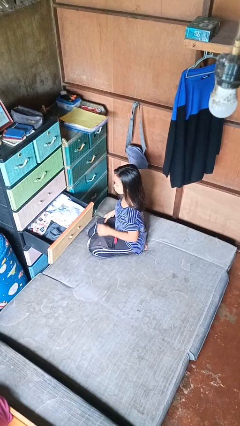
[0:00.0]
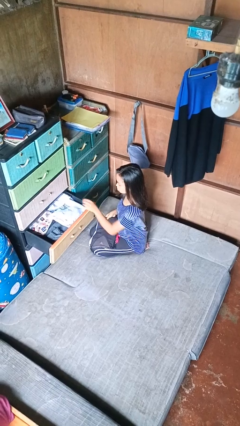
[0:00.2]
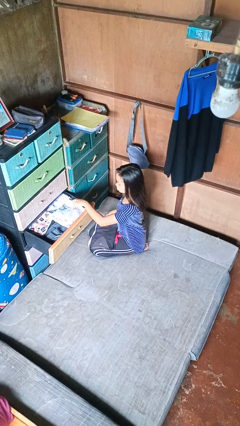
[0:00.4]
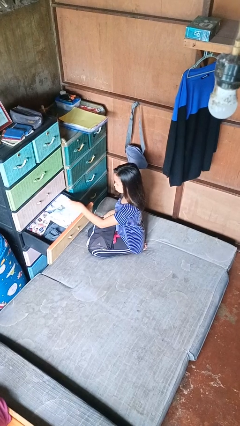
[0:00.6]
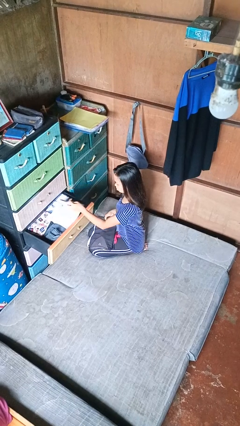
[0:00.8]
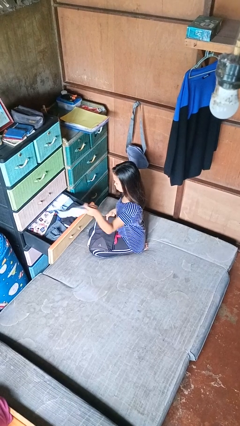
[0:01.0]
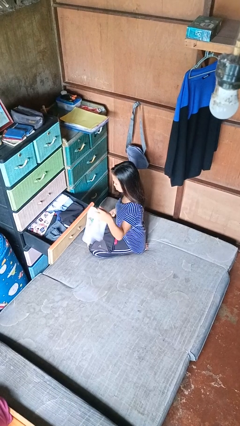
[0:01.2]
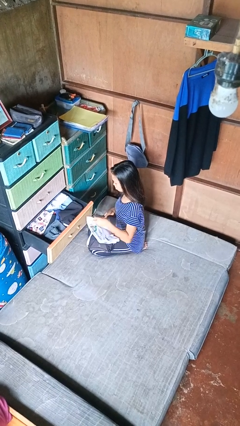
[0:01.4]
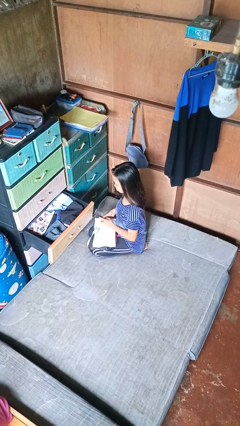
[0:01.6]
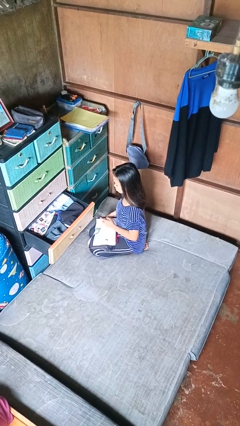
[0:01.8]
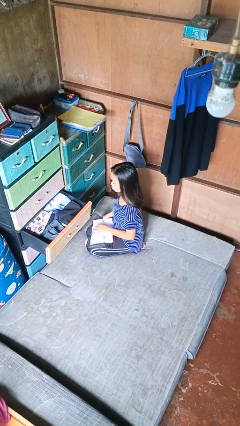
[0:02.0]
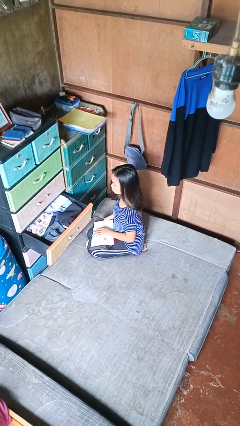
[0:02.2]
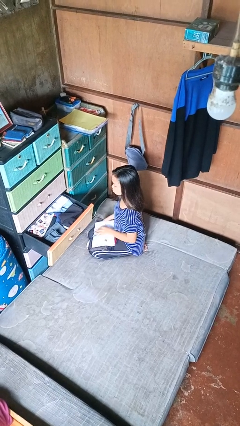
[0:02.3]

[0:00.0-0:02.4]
person takes clothes from dresser

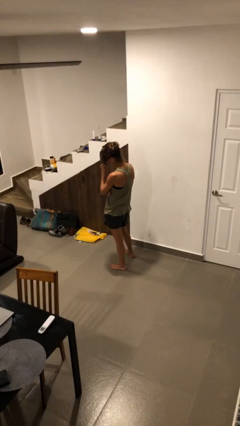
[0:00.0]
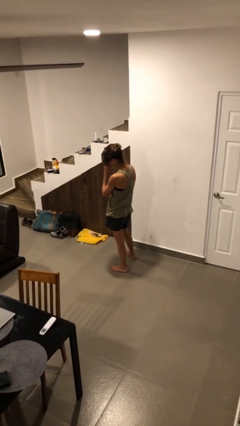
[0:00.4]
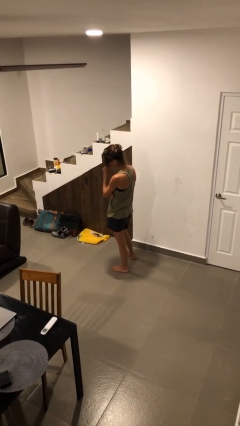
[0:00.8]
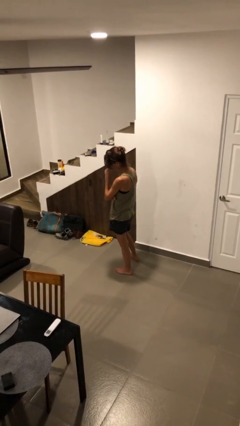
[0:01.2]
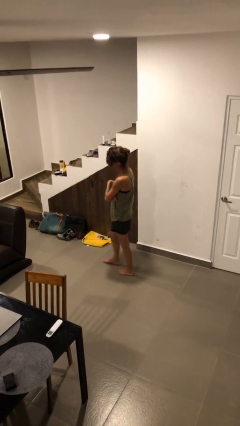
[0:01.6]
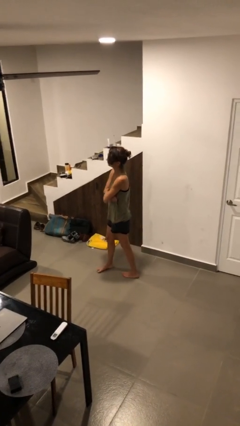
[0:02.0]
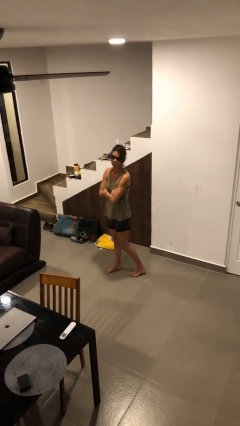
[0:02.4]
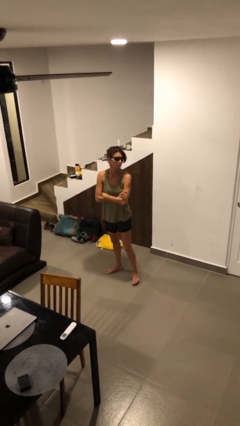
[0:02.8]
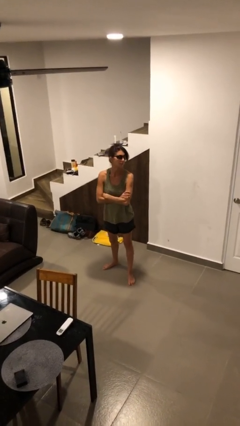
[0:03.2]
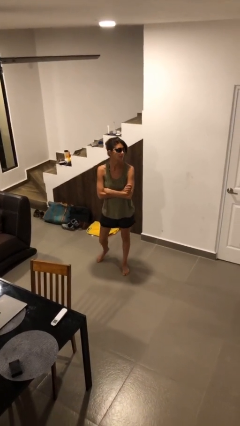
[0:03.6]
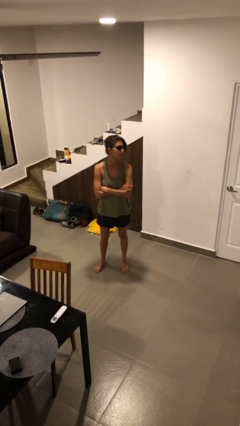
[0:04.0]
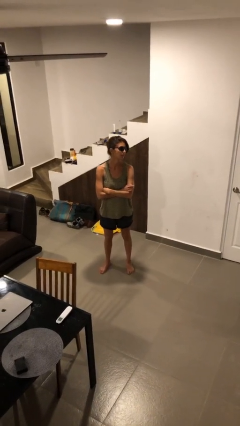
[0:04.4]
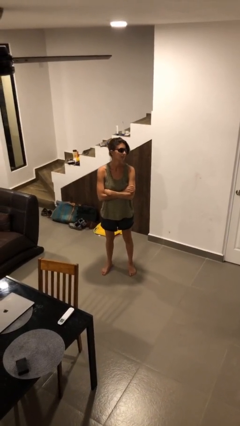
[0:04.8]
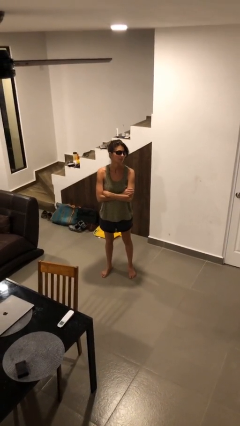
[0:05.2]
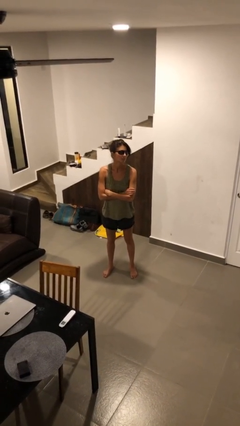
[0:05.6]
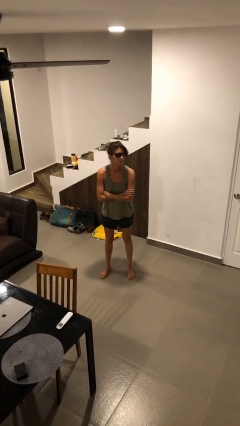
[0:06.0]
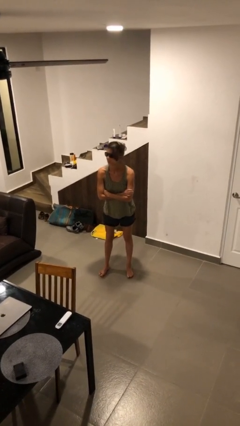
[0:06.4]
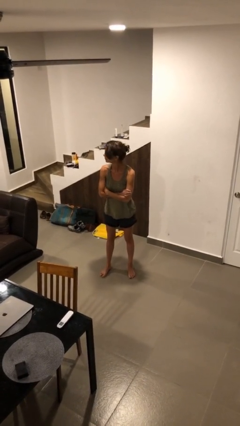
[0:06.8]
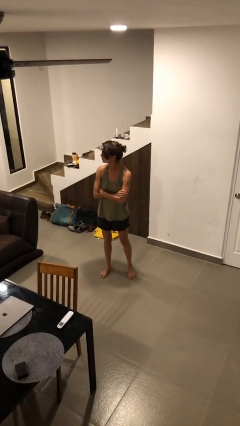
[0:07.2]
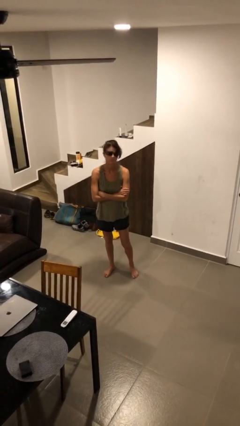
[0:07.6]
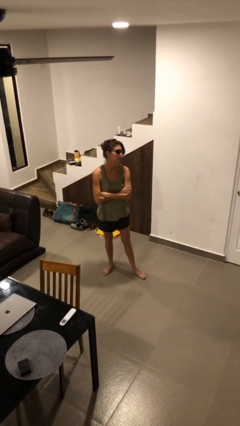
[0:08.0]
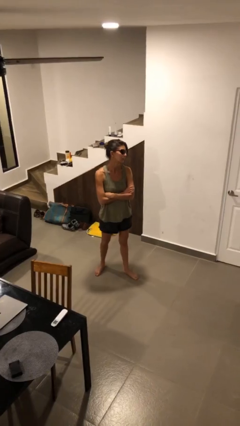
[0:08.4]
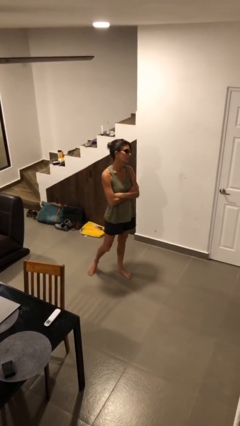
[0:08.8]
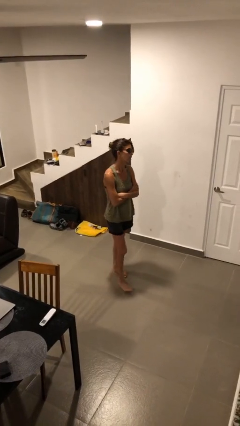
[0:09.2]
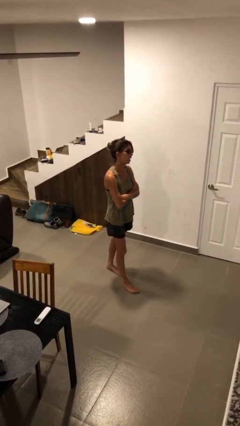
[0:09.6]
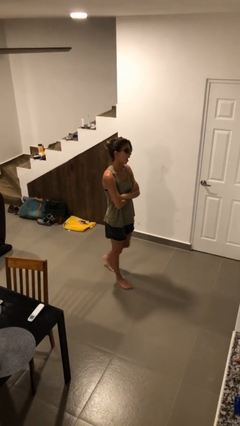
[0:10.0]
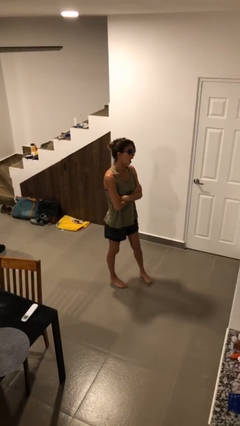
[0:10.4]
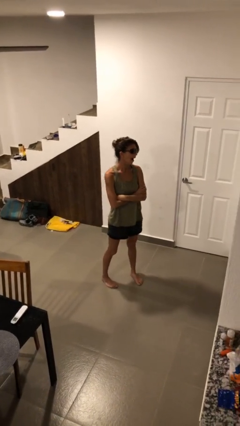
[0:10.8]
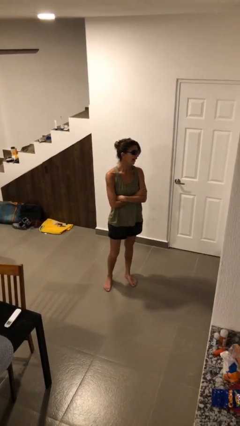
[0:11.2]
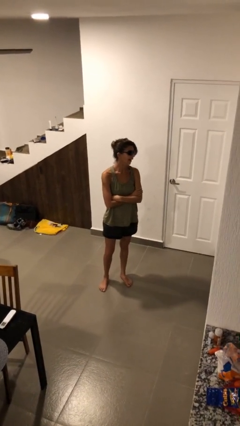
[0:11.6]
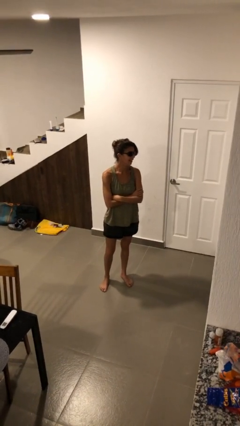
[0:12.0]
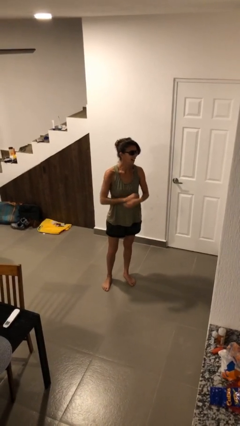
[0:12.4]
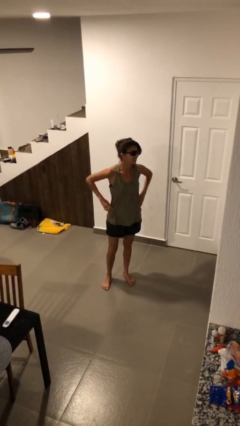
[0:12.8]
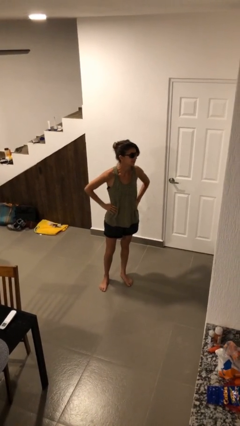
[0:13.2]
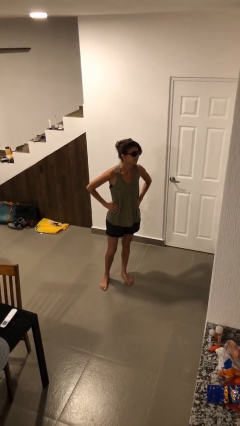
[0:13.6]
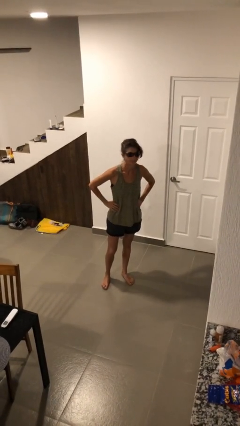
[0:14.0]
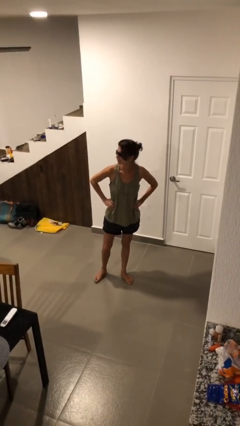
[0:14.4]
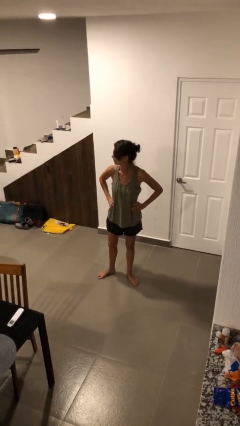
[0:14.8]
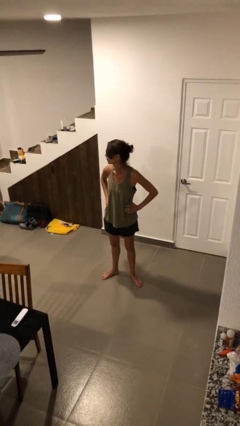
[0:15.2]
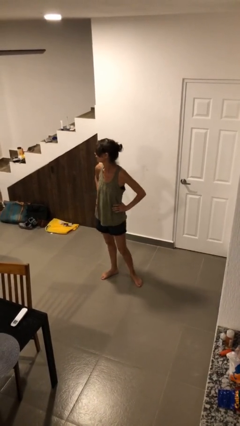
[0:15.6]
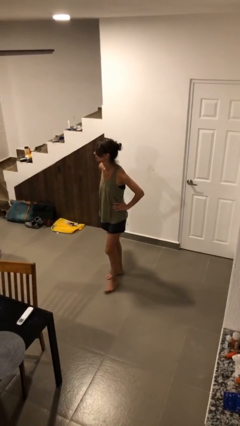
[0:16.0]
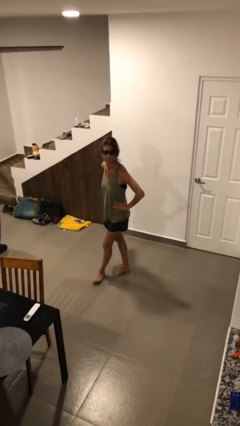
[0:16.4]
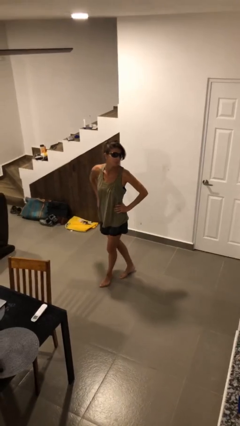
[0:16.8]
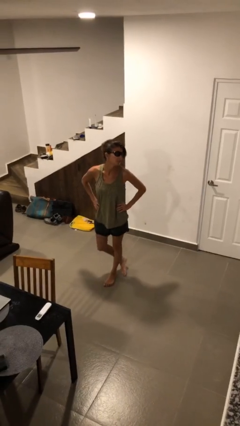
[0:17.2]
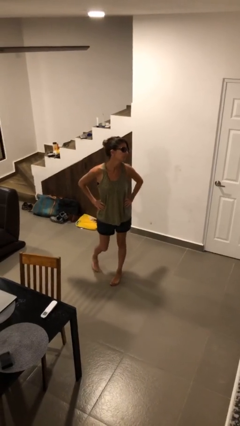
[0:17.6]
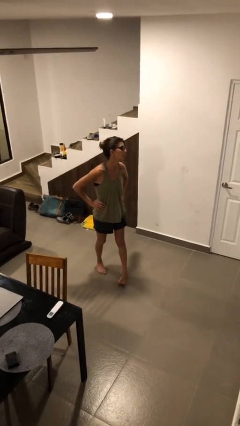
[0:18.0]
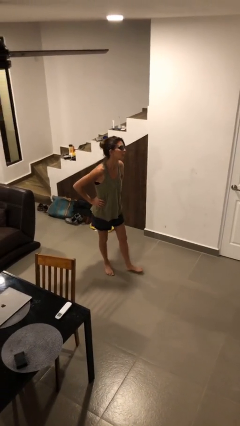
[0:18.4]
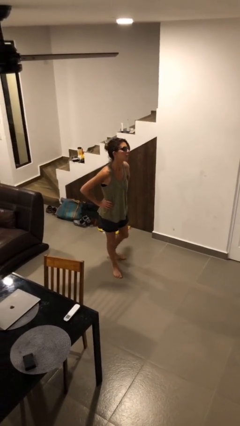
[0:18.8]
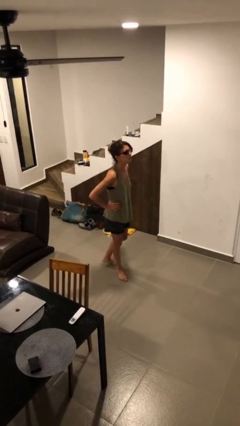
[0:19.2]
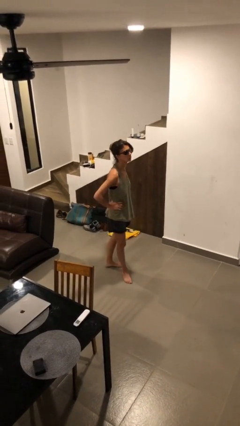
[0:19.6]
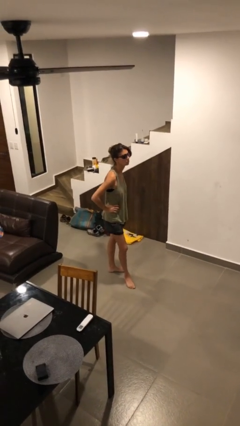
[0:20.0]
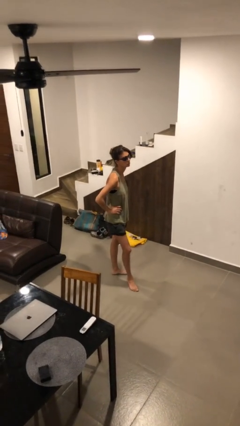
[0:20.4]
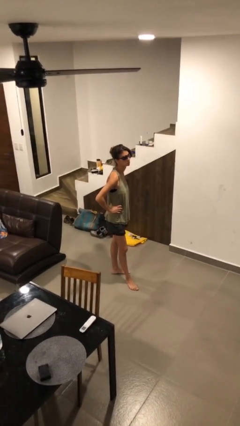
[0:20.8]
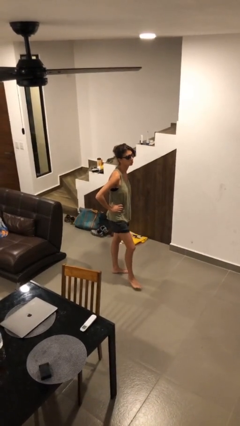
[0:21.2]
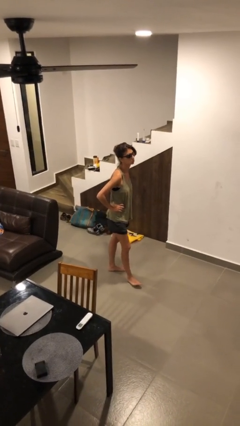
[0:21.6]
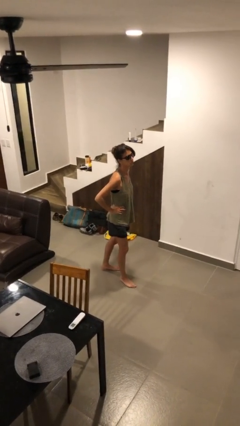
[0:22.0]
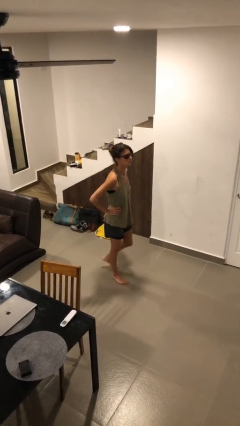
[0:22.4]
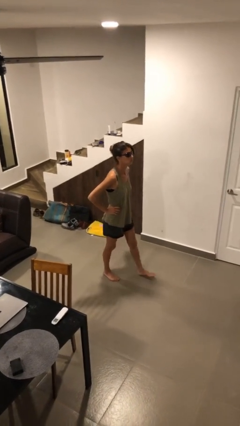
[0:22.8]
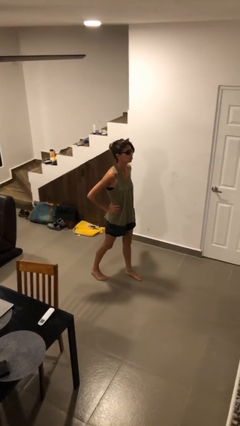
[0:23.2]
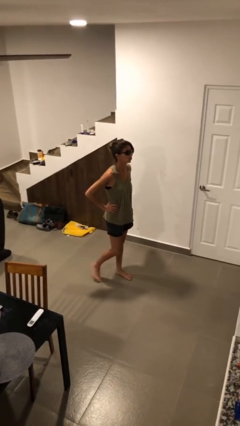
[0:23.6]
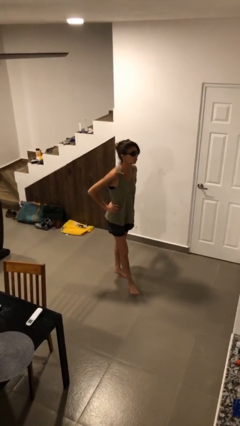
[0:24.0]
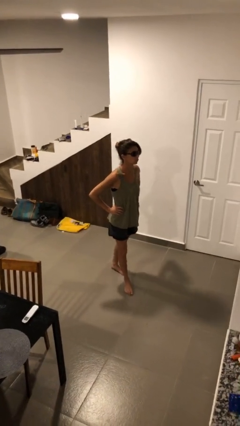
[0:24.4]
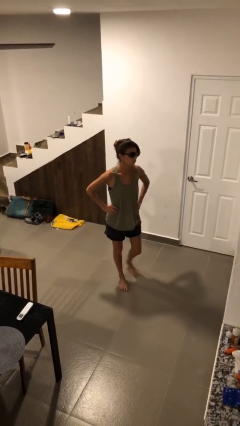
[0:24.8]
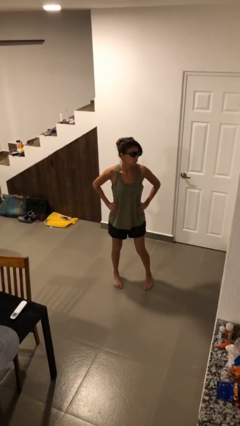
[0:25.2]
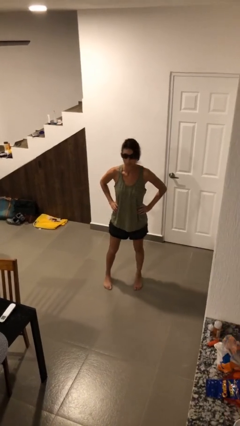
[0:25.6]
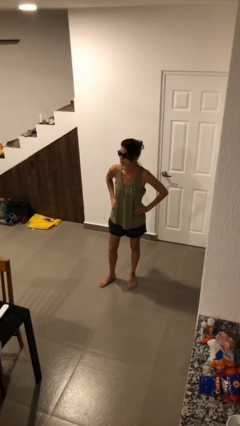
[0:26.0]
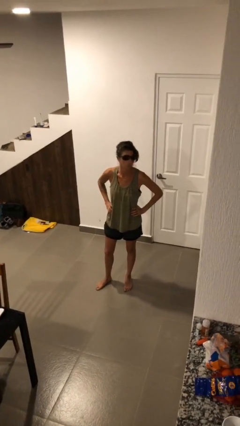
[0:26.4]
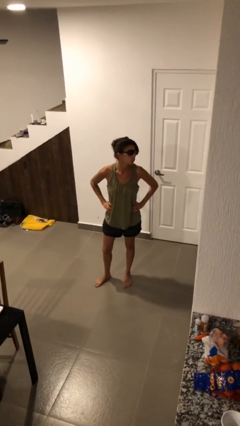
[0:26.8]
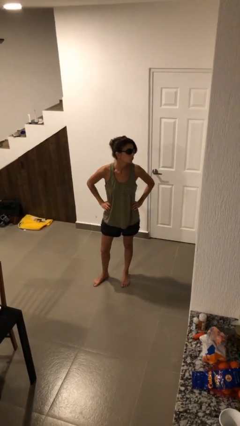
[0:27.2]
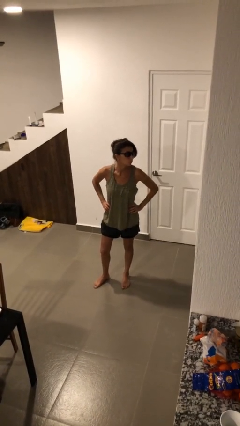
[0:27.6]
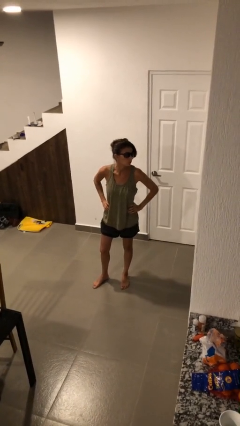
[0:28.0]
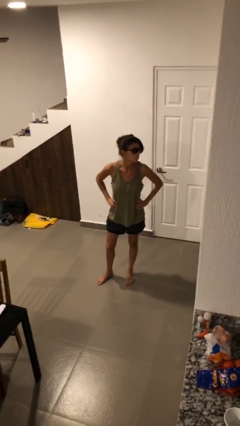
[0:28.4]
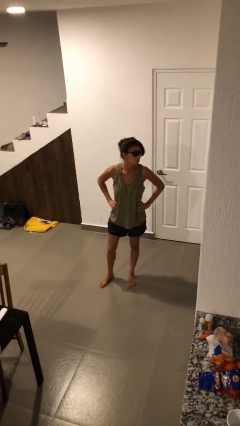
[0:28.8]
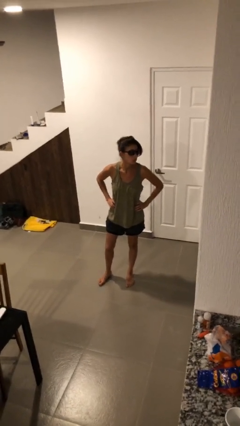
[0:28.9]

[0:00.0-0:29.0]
person walks

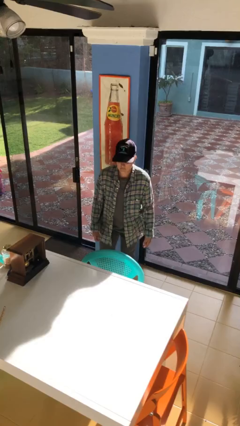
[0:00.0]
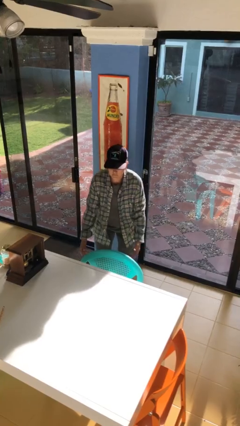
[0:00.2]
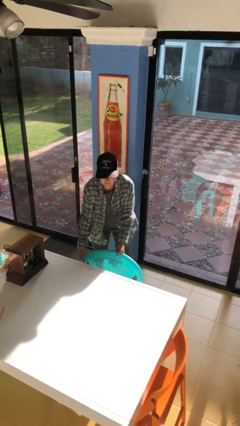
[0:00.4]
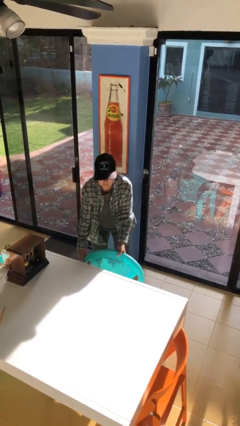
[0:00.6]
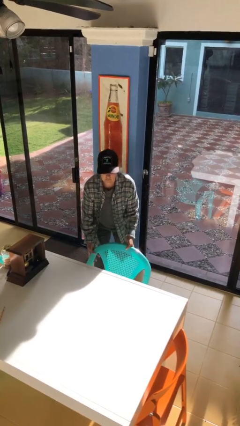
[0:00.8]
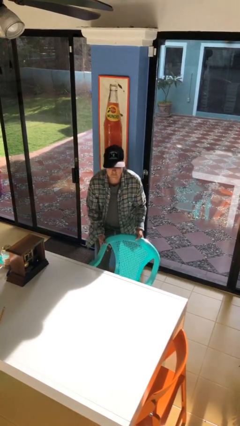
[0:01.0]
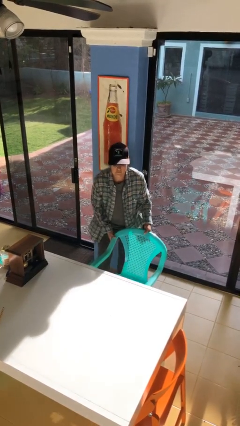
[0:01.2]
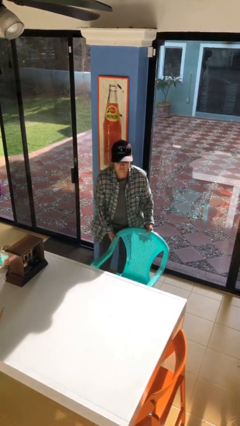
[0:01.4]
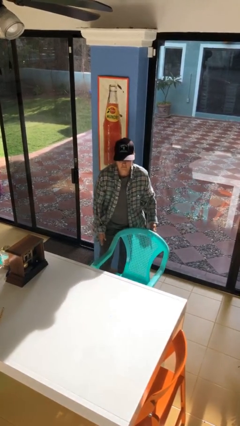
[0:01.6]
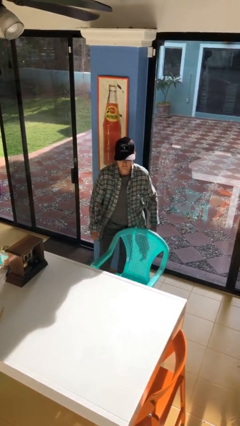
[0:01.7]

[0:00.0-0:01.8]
person pulls out chair
